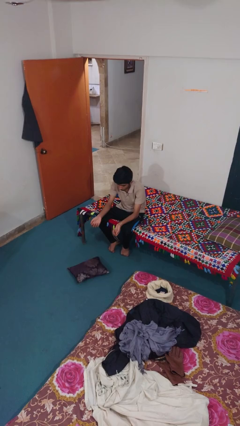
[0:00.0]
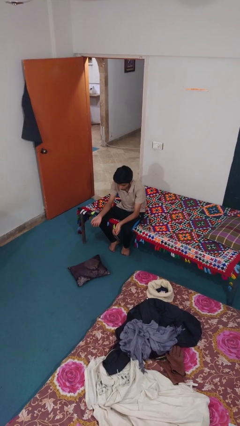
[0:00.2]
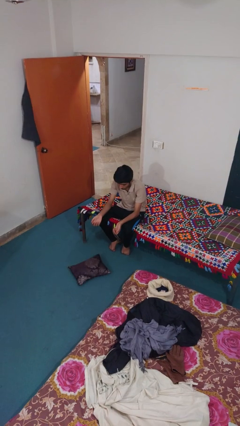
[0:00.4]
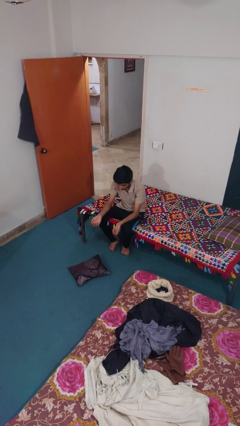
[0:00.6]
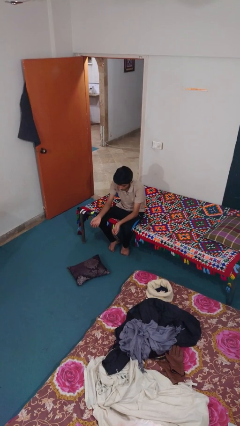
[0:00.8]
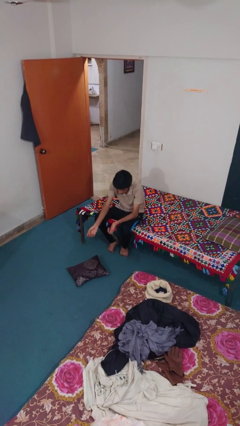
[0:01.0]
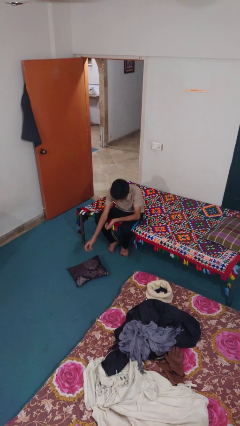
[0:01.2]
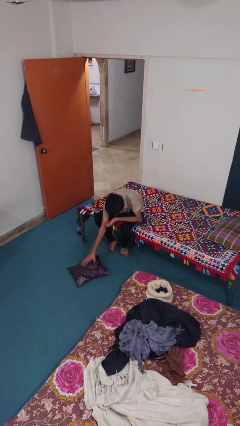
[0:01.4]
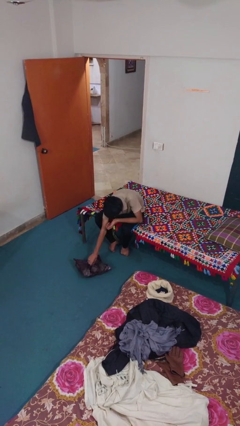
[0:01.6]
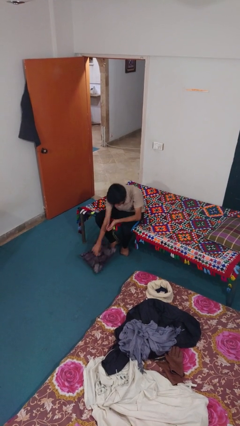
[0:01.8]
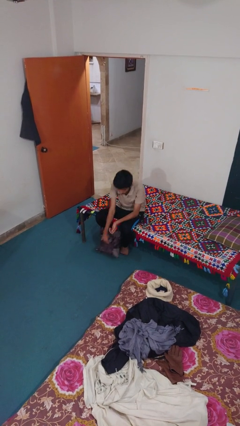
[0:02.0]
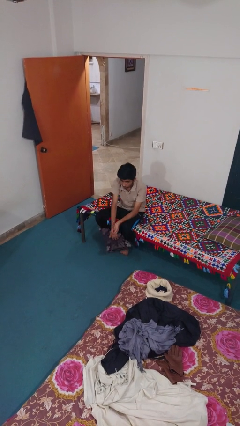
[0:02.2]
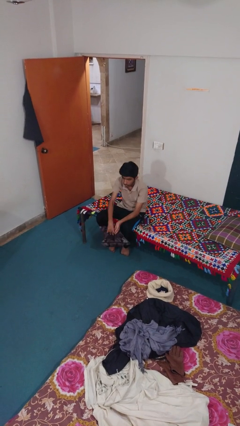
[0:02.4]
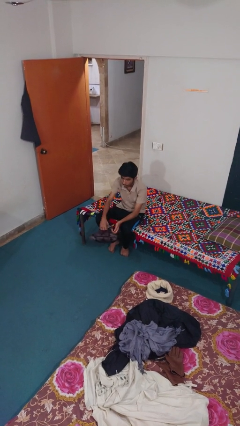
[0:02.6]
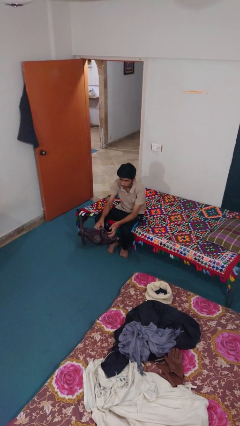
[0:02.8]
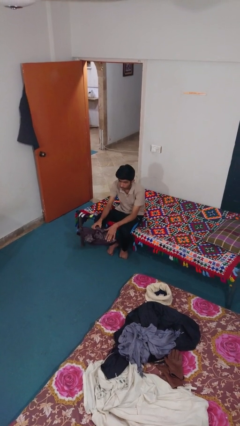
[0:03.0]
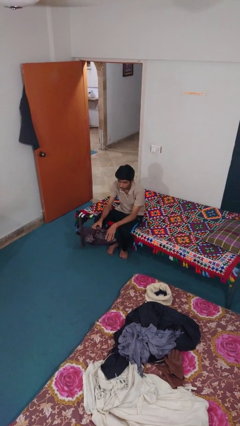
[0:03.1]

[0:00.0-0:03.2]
person picks up object from floor

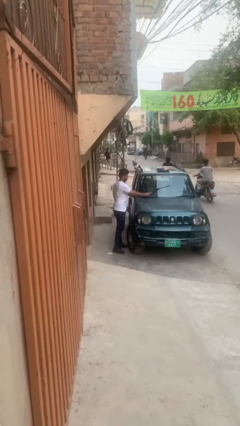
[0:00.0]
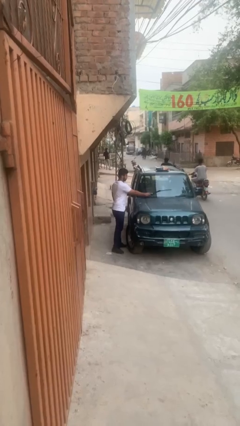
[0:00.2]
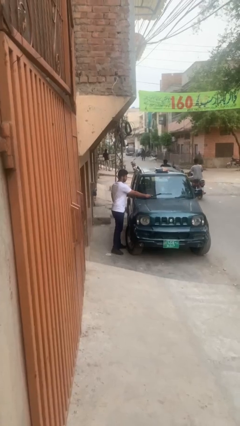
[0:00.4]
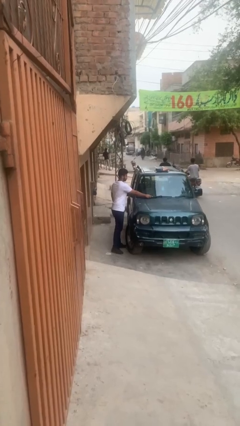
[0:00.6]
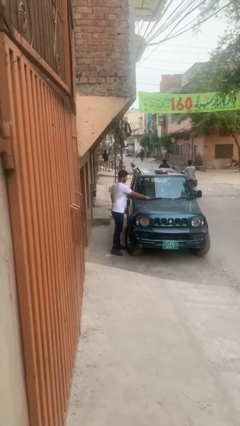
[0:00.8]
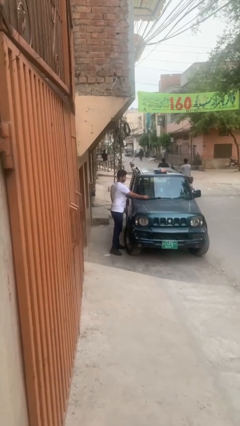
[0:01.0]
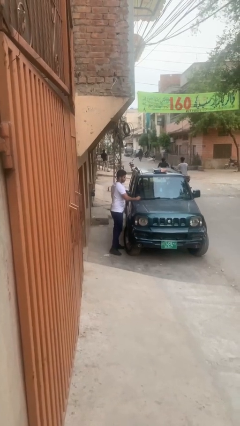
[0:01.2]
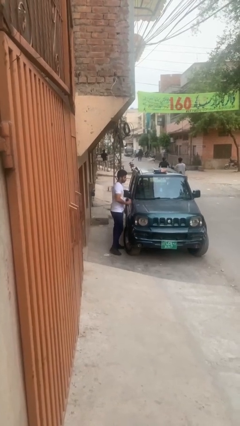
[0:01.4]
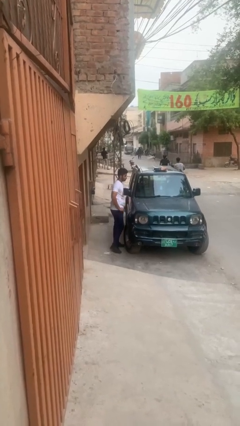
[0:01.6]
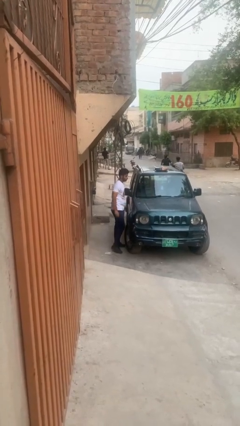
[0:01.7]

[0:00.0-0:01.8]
person flips down car wipers

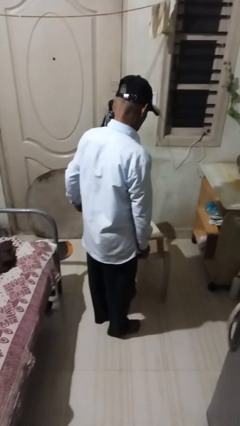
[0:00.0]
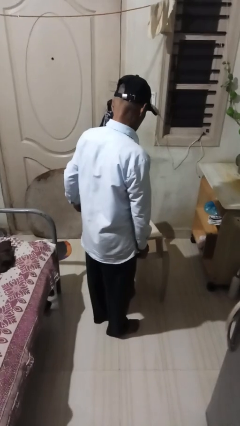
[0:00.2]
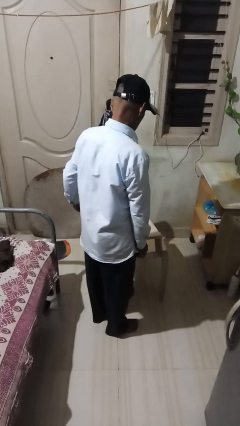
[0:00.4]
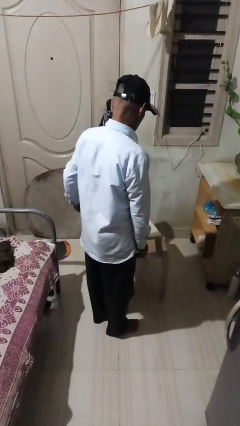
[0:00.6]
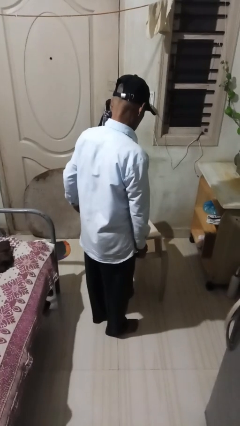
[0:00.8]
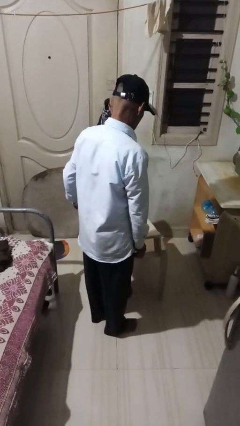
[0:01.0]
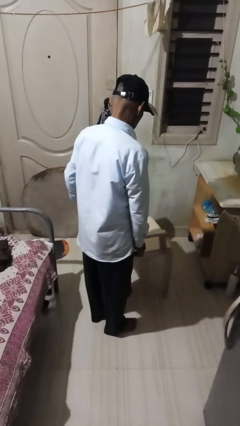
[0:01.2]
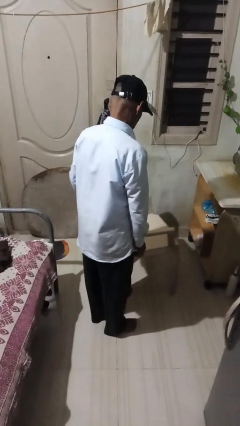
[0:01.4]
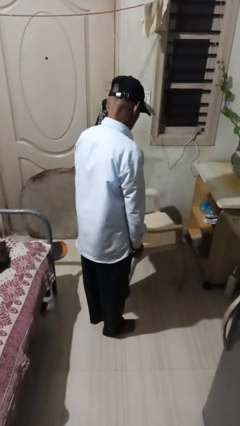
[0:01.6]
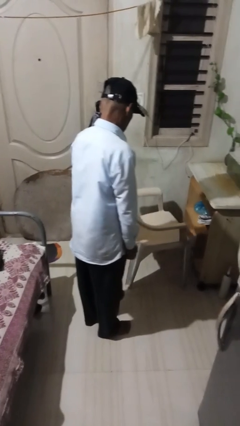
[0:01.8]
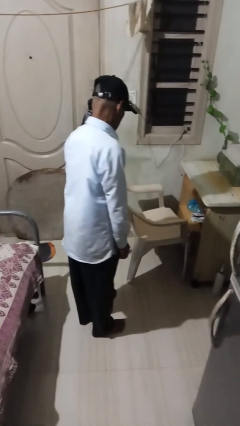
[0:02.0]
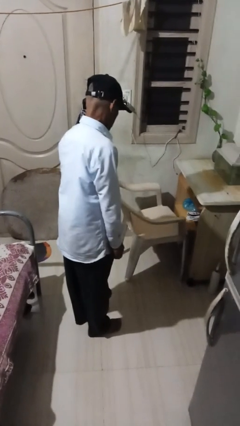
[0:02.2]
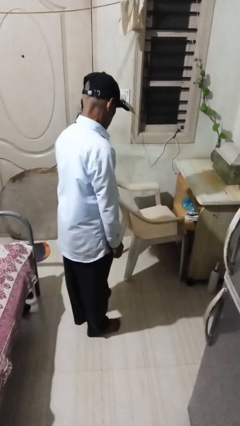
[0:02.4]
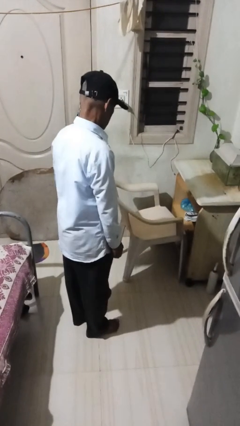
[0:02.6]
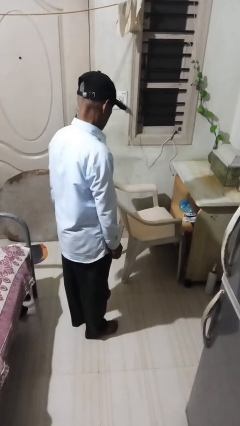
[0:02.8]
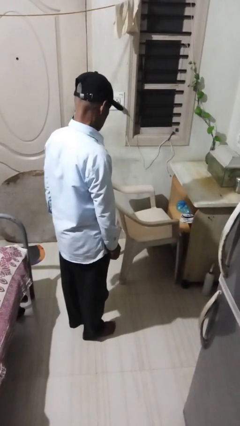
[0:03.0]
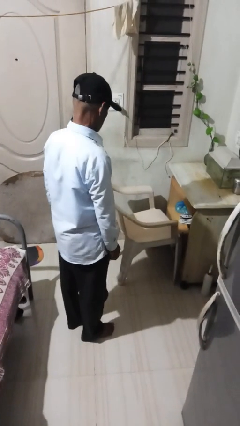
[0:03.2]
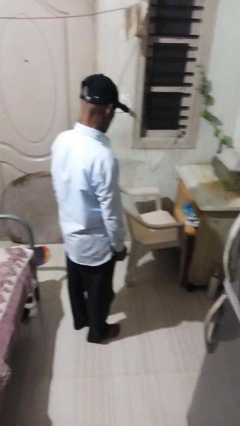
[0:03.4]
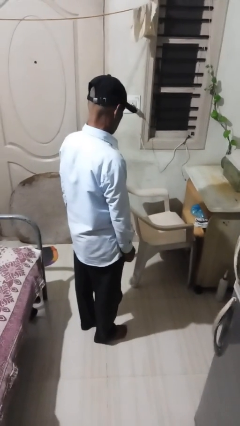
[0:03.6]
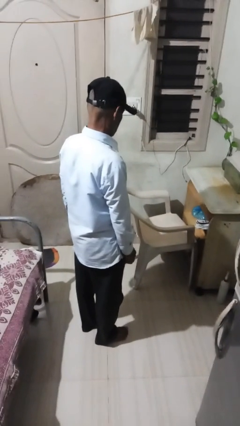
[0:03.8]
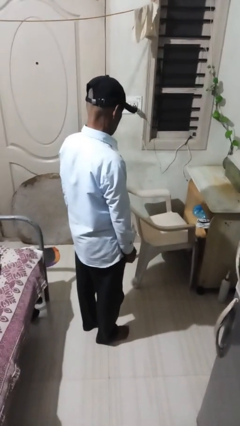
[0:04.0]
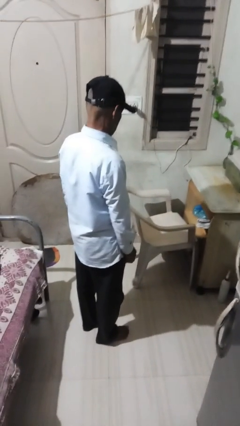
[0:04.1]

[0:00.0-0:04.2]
person pushes in chair

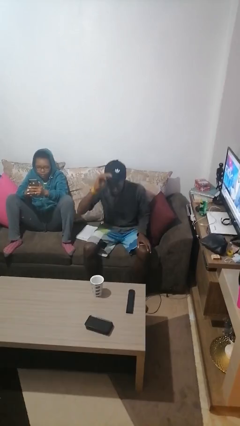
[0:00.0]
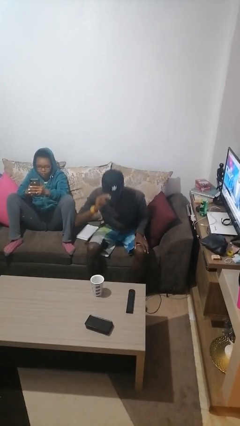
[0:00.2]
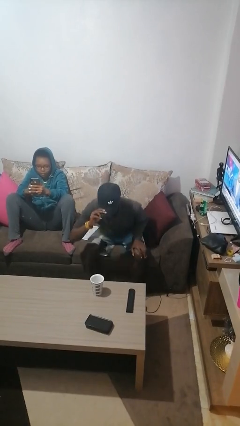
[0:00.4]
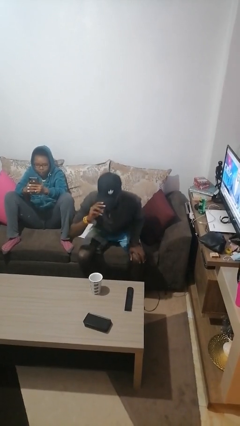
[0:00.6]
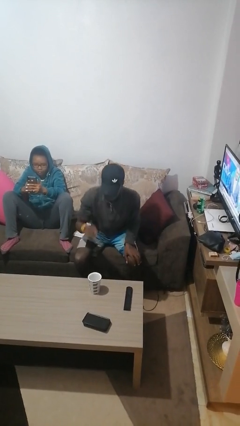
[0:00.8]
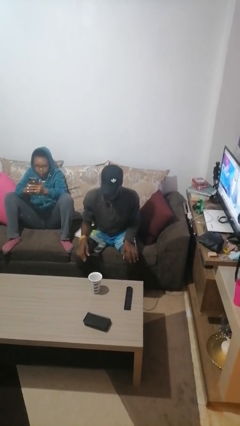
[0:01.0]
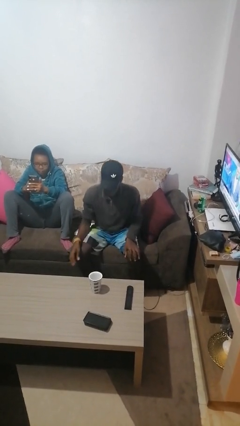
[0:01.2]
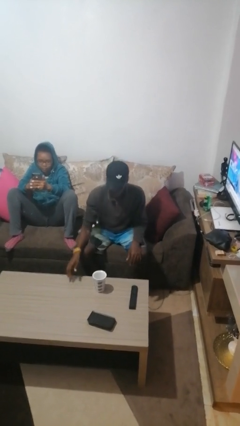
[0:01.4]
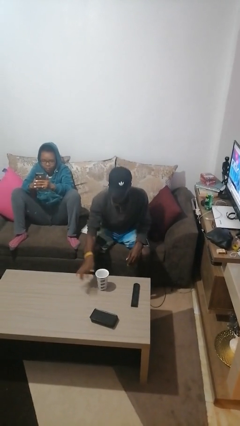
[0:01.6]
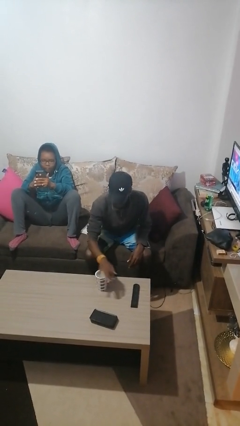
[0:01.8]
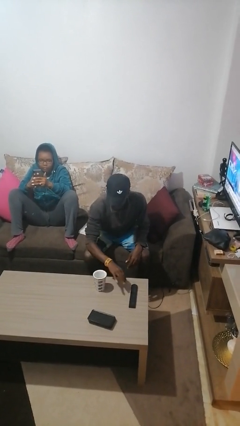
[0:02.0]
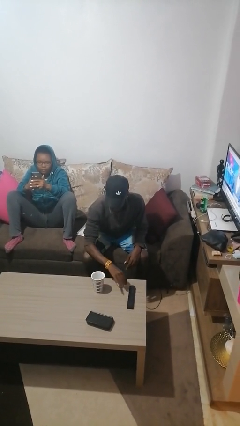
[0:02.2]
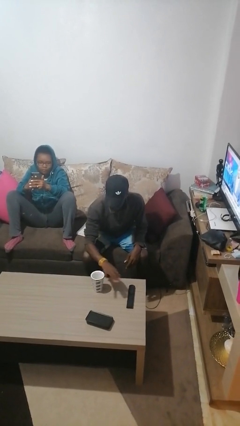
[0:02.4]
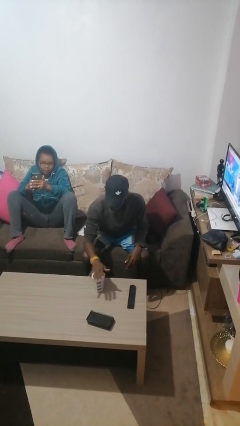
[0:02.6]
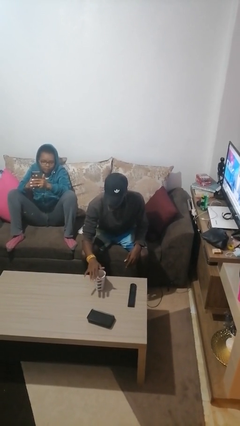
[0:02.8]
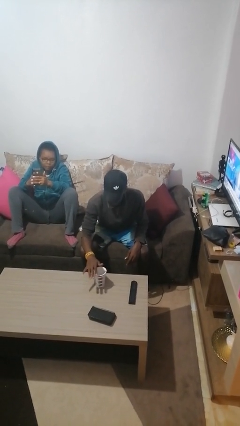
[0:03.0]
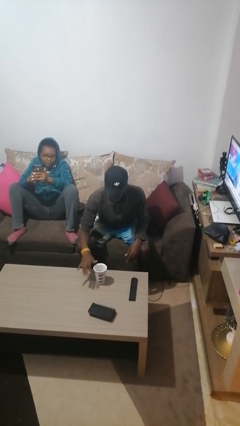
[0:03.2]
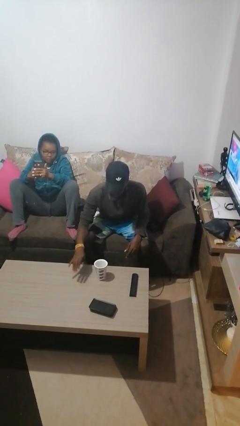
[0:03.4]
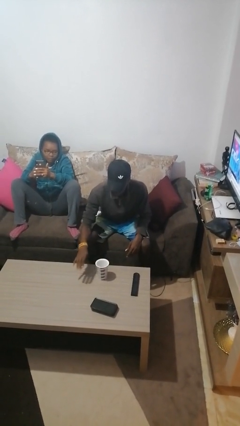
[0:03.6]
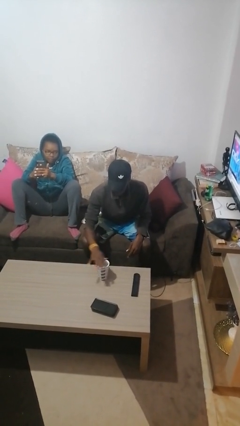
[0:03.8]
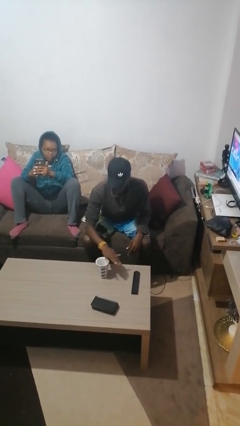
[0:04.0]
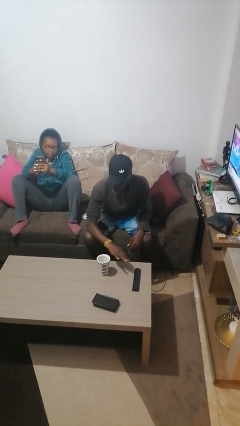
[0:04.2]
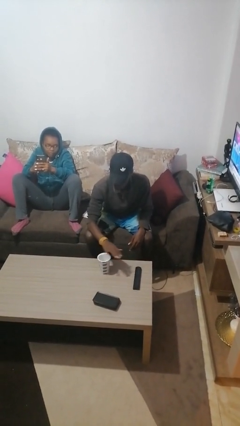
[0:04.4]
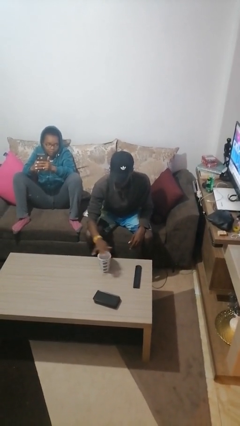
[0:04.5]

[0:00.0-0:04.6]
person waves hand over object

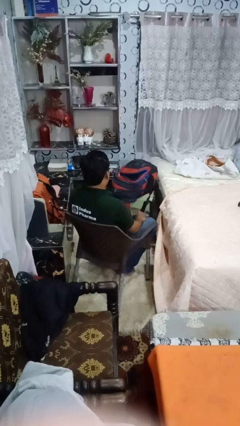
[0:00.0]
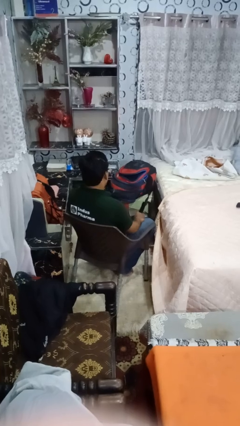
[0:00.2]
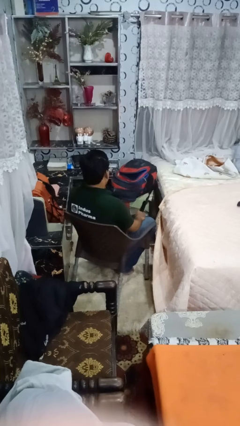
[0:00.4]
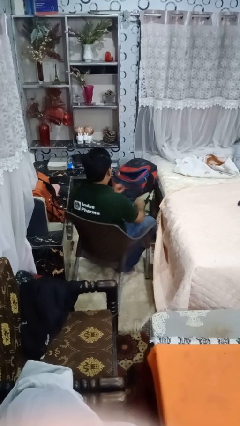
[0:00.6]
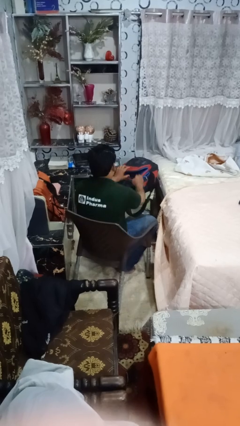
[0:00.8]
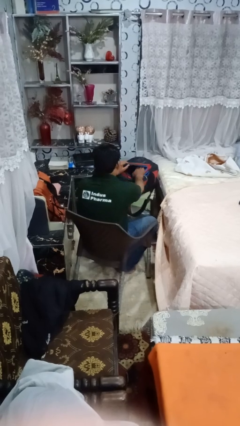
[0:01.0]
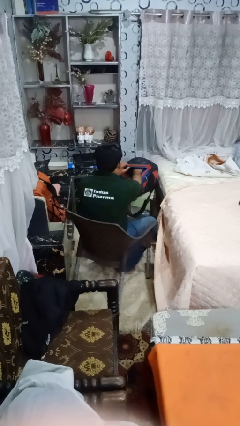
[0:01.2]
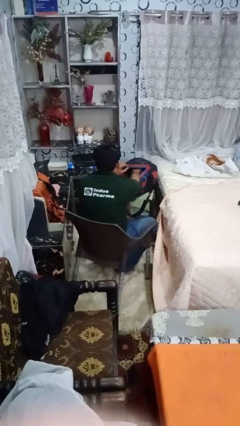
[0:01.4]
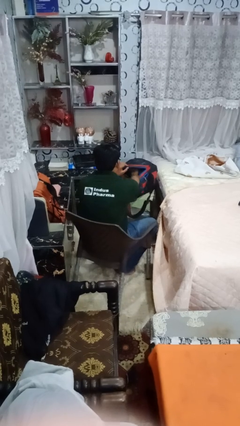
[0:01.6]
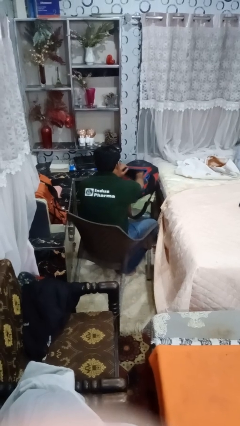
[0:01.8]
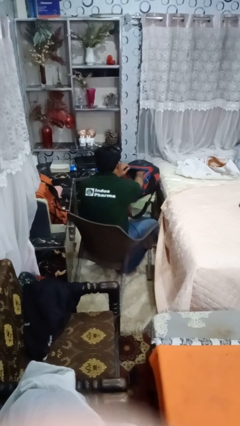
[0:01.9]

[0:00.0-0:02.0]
person searches in backpack

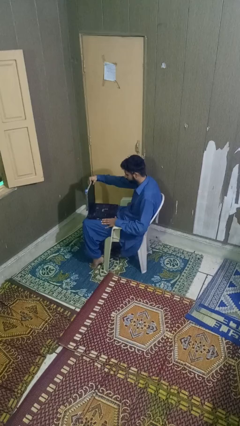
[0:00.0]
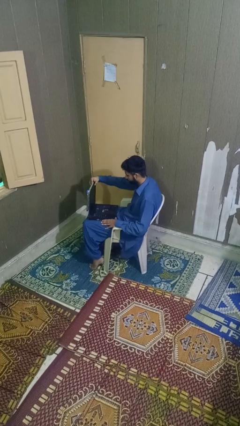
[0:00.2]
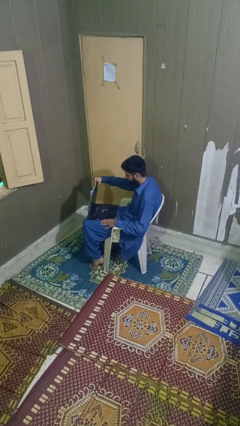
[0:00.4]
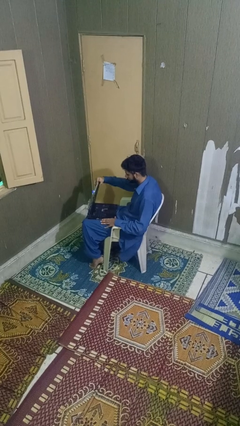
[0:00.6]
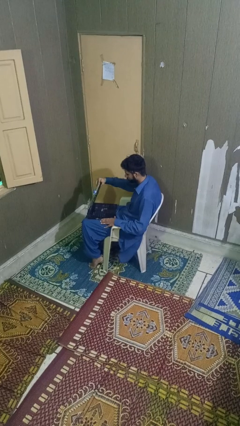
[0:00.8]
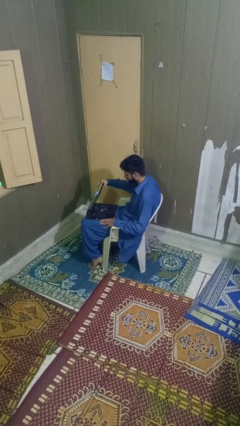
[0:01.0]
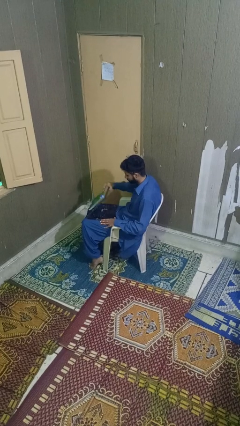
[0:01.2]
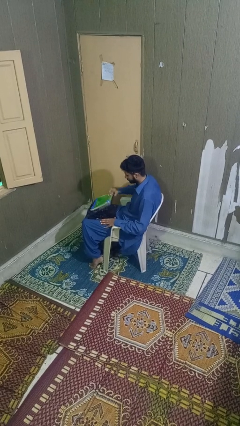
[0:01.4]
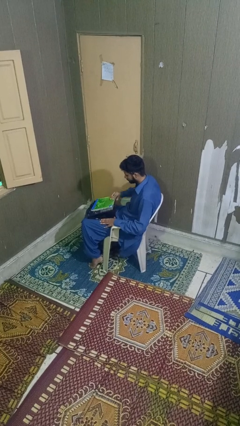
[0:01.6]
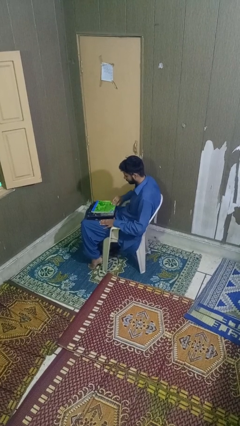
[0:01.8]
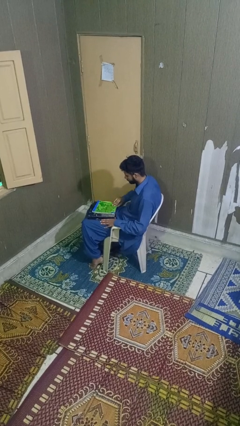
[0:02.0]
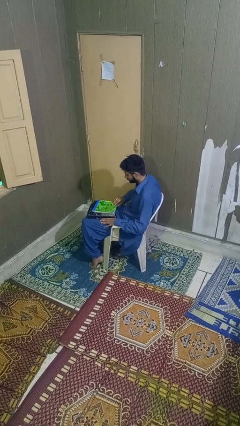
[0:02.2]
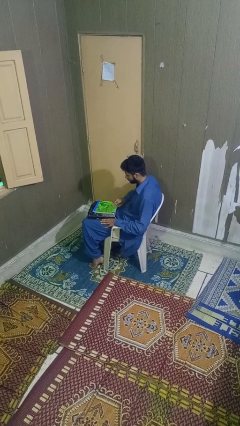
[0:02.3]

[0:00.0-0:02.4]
person closes laptop
